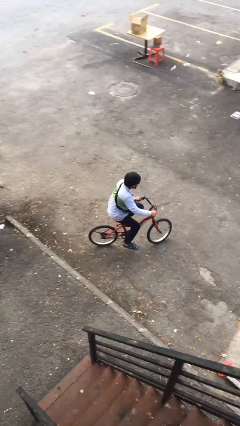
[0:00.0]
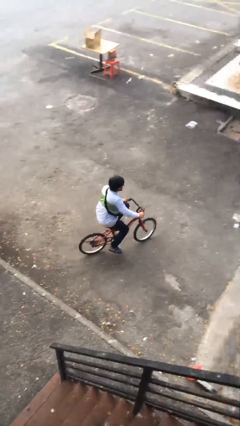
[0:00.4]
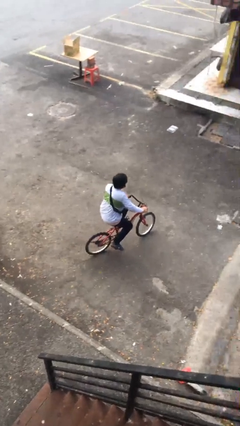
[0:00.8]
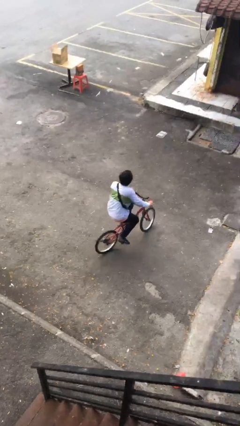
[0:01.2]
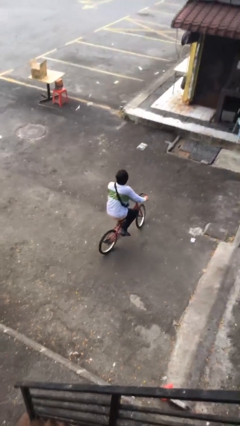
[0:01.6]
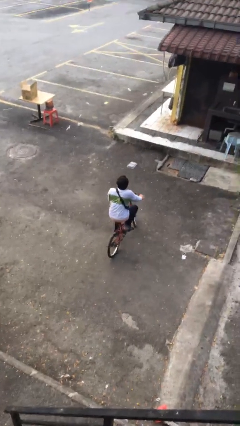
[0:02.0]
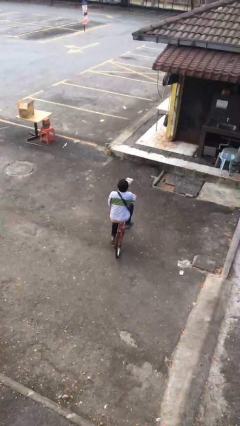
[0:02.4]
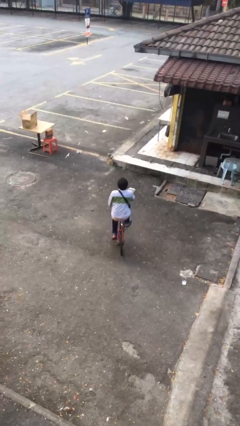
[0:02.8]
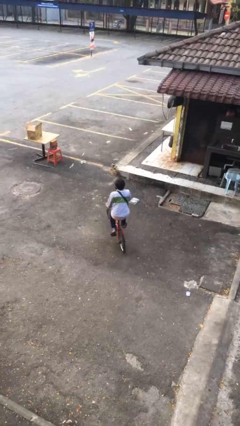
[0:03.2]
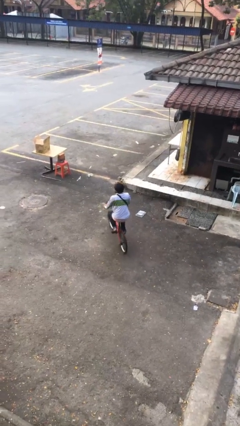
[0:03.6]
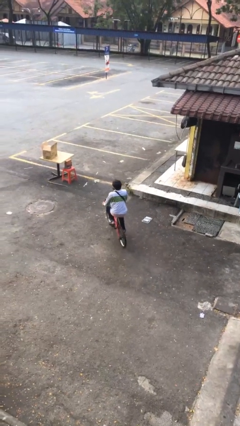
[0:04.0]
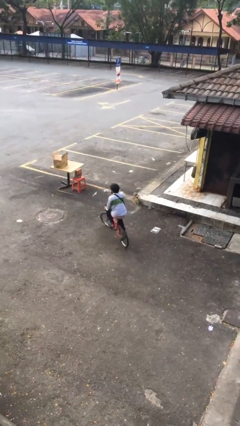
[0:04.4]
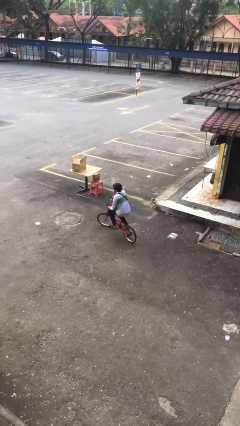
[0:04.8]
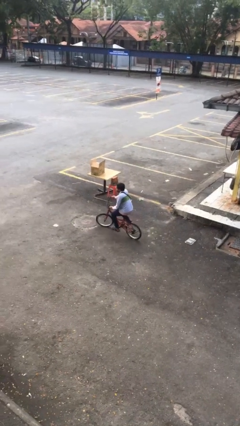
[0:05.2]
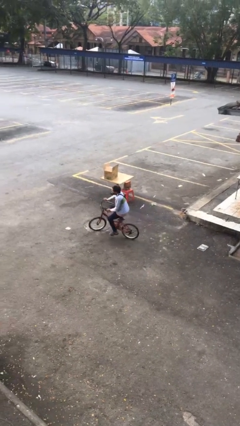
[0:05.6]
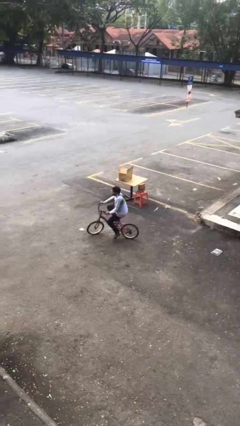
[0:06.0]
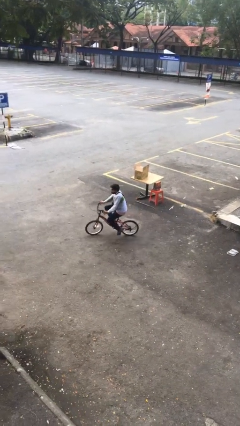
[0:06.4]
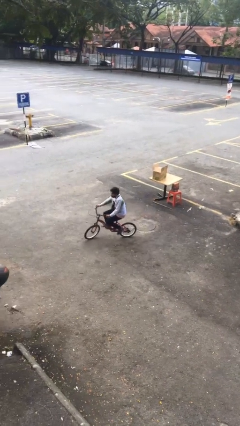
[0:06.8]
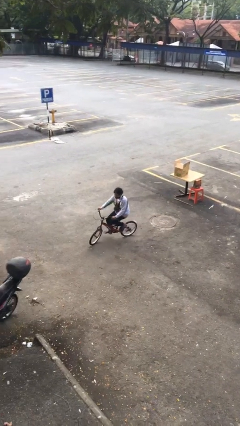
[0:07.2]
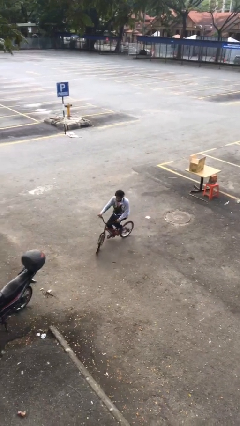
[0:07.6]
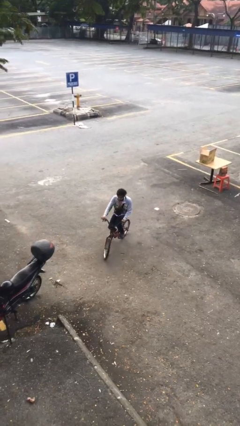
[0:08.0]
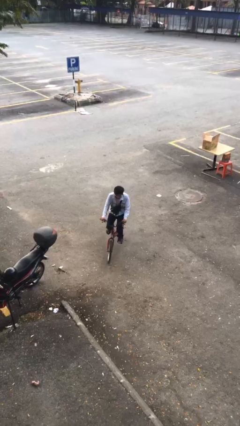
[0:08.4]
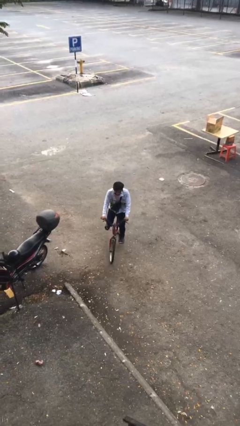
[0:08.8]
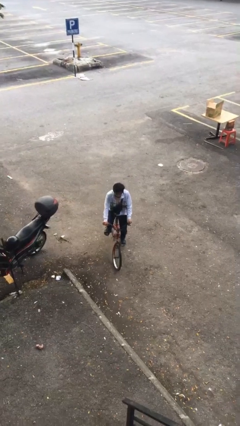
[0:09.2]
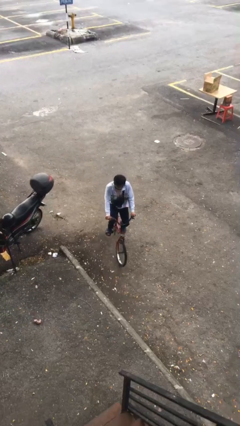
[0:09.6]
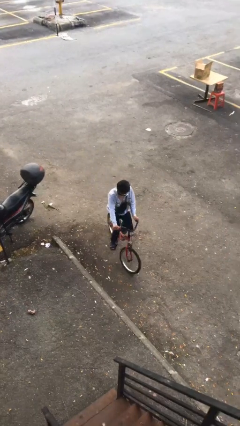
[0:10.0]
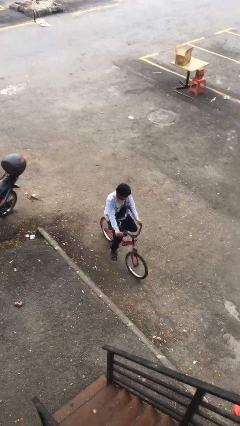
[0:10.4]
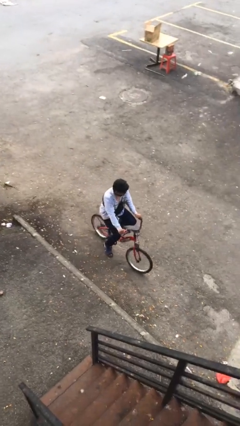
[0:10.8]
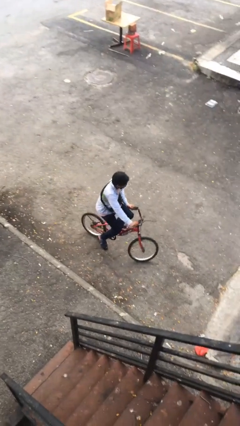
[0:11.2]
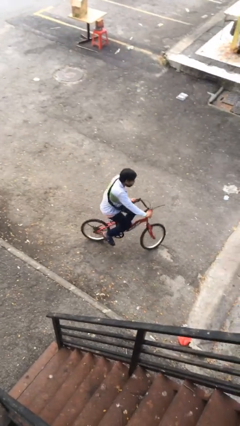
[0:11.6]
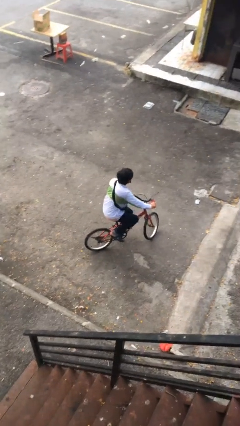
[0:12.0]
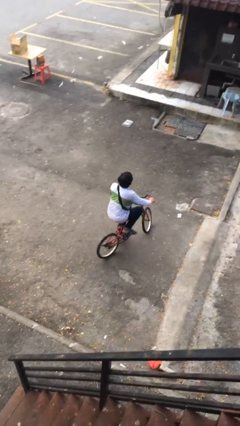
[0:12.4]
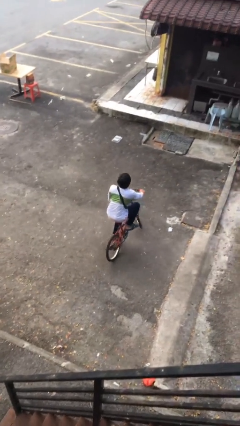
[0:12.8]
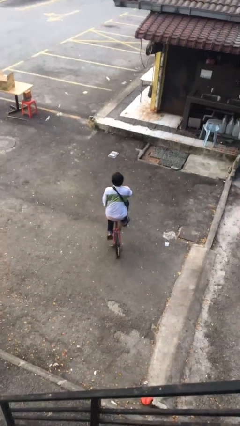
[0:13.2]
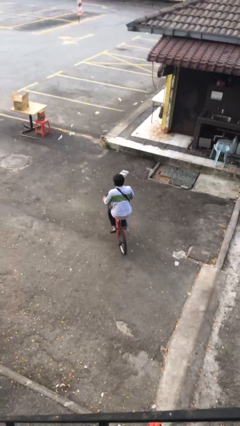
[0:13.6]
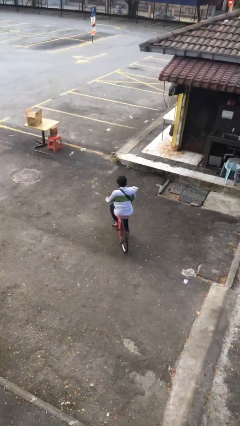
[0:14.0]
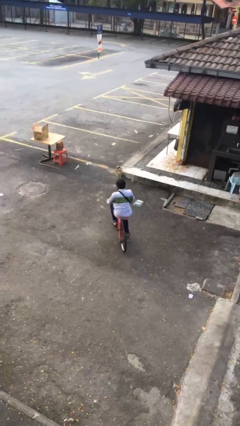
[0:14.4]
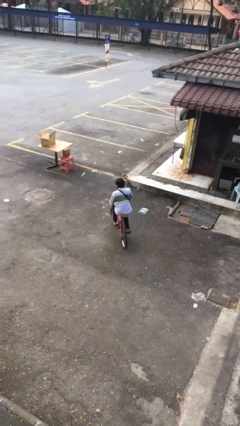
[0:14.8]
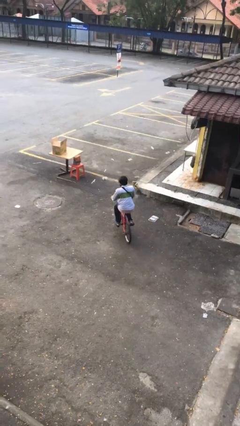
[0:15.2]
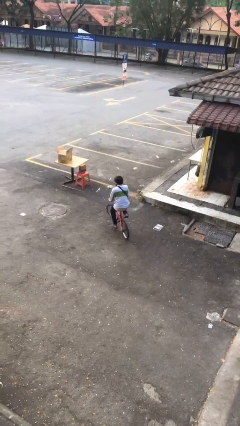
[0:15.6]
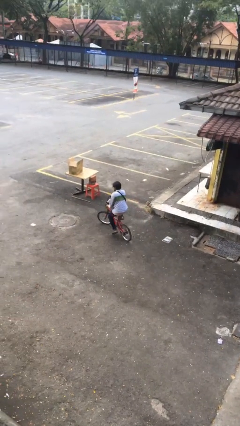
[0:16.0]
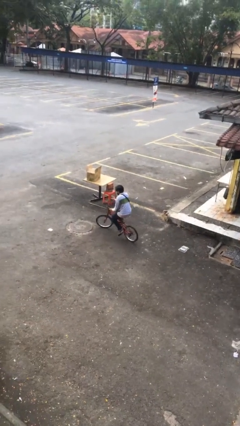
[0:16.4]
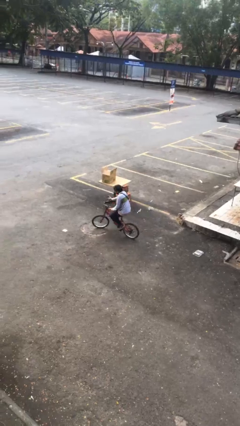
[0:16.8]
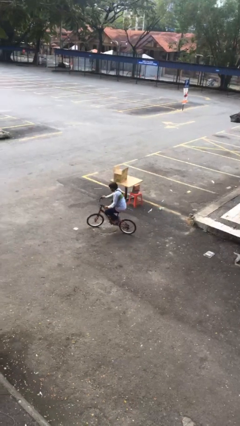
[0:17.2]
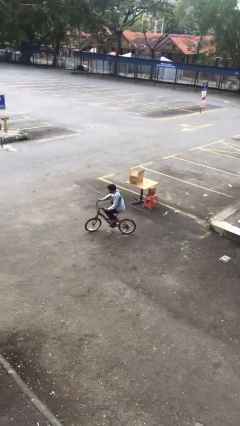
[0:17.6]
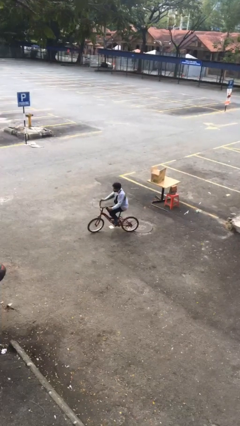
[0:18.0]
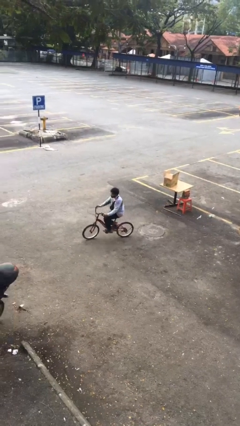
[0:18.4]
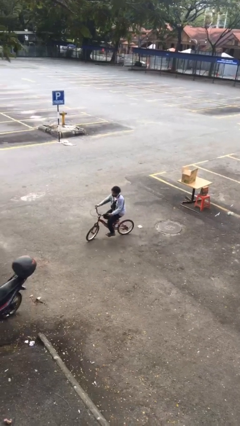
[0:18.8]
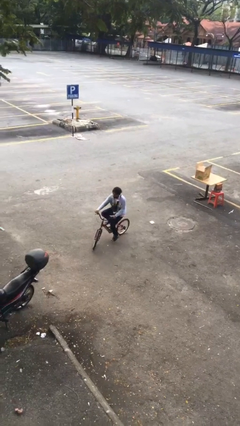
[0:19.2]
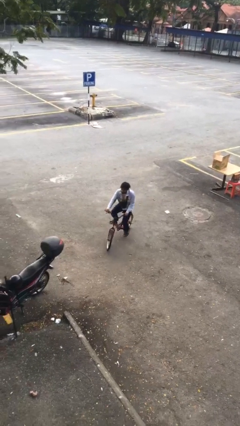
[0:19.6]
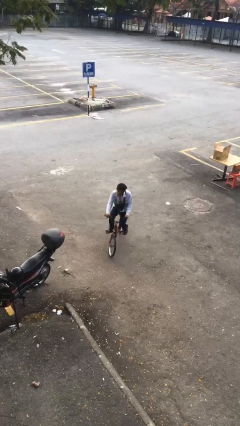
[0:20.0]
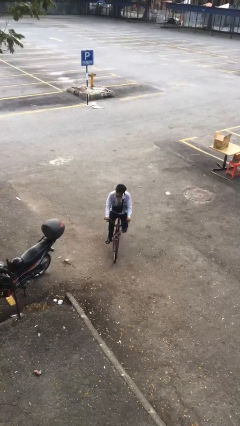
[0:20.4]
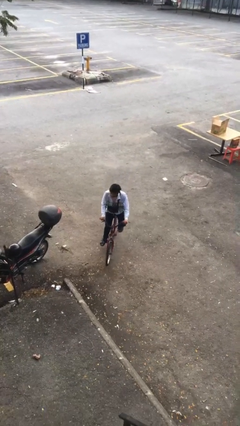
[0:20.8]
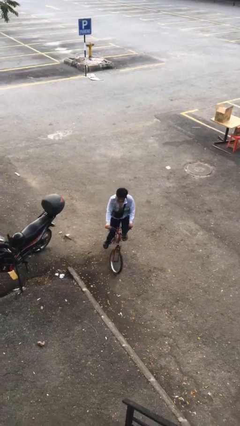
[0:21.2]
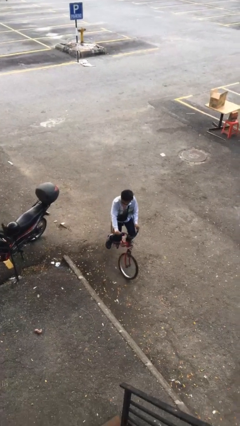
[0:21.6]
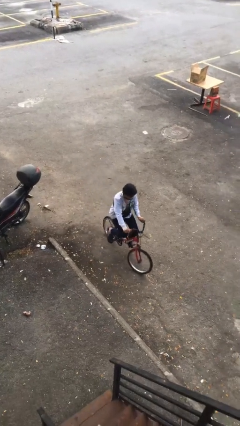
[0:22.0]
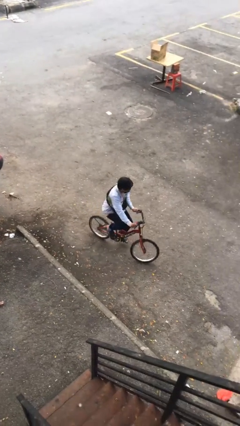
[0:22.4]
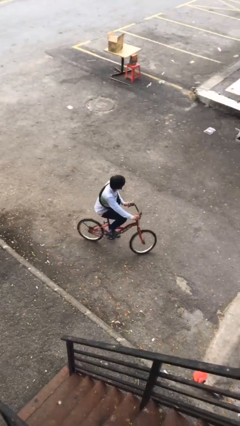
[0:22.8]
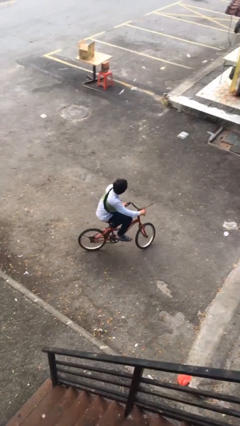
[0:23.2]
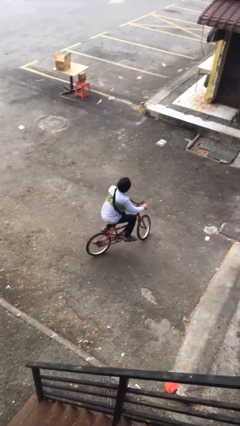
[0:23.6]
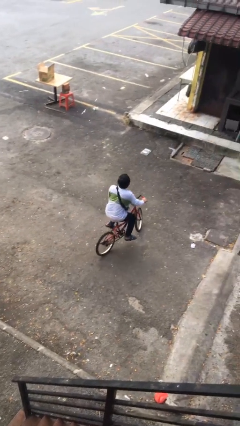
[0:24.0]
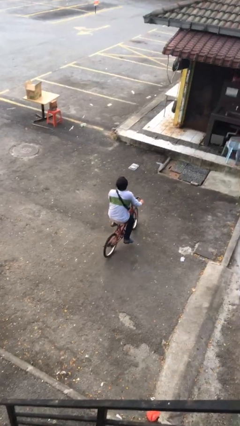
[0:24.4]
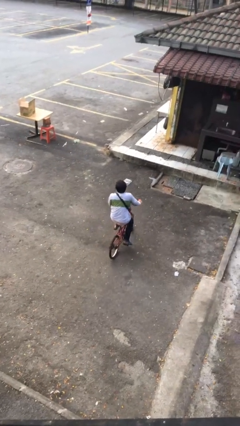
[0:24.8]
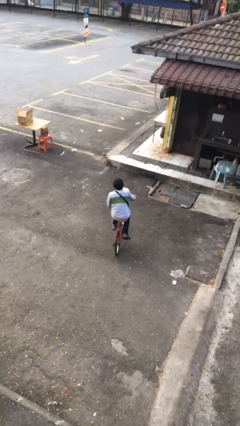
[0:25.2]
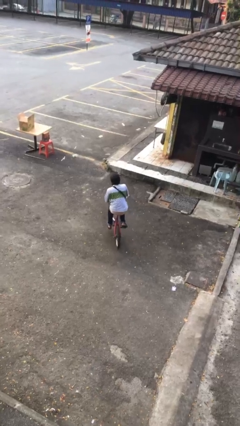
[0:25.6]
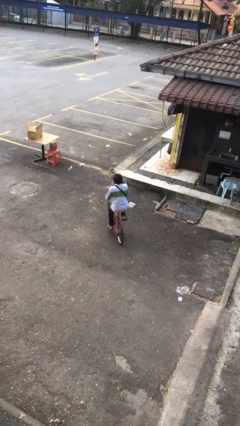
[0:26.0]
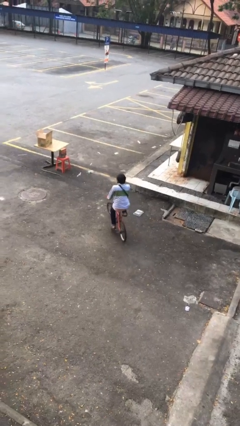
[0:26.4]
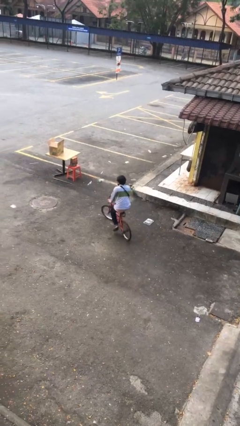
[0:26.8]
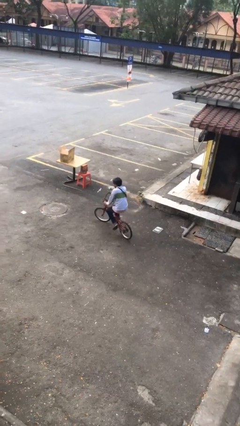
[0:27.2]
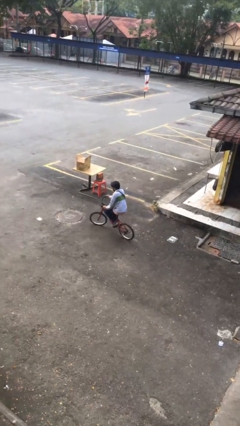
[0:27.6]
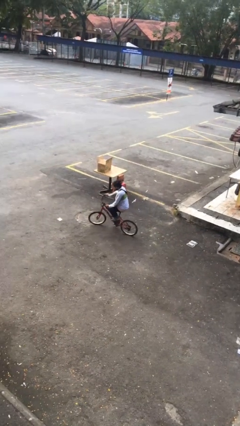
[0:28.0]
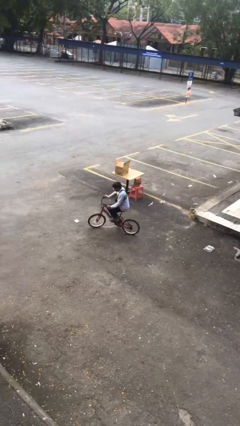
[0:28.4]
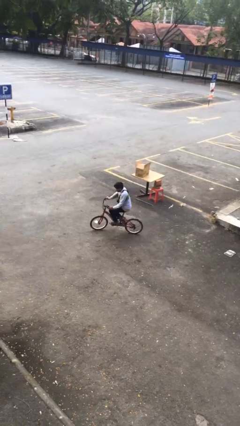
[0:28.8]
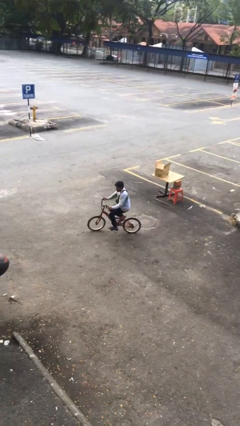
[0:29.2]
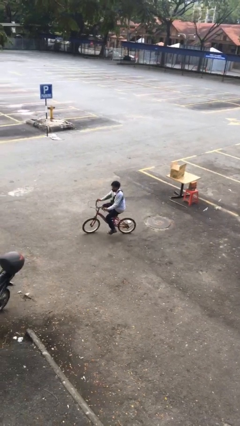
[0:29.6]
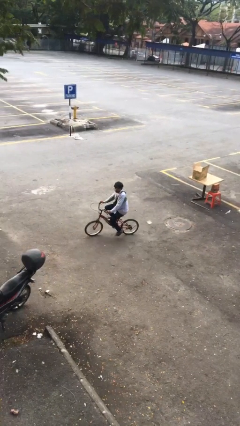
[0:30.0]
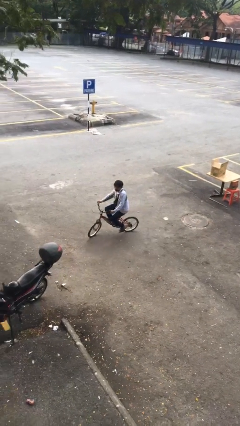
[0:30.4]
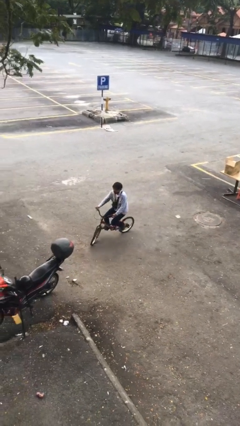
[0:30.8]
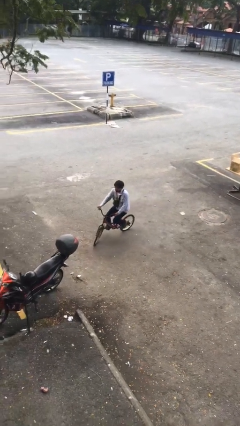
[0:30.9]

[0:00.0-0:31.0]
person rides bicycle

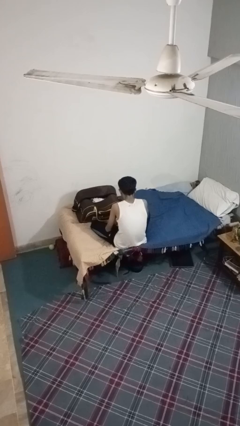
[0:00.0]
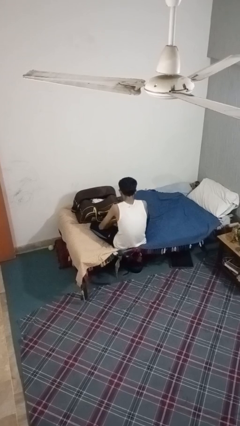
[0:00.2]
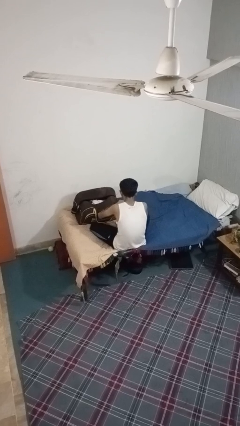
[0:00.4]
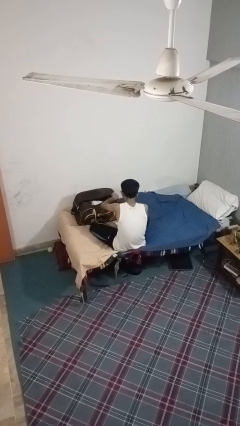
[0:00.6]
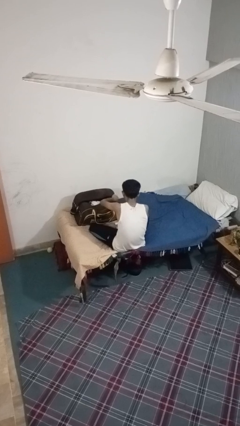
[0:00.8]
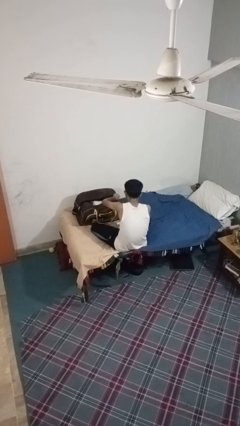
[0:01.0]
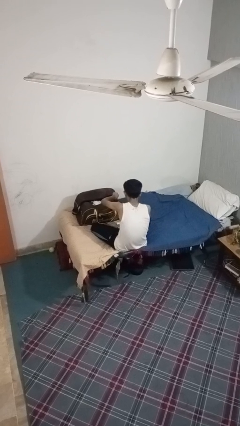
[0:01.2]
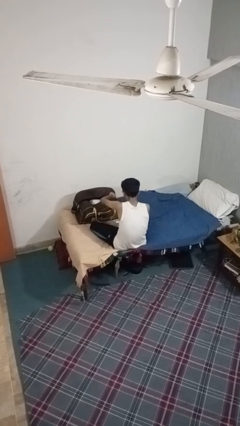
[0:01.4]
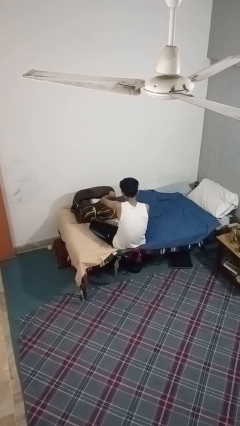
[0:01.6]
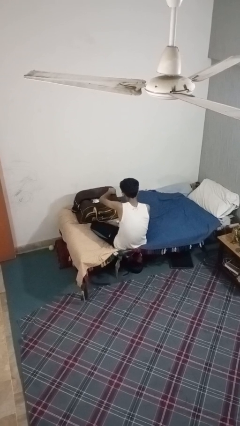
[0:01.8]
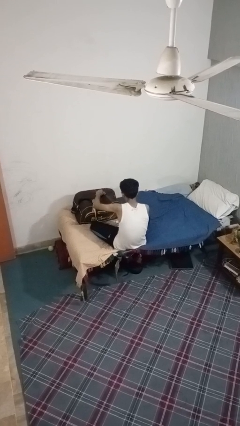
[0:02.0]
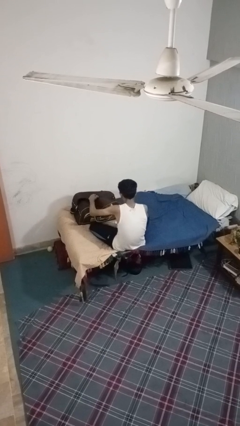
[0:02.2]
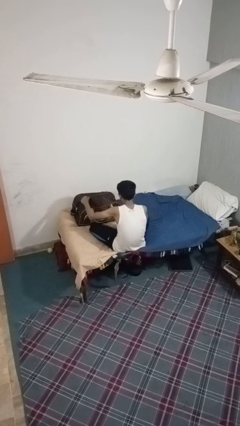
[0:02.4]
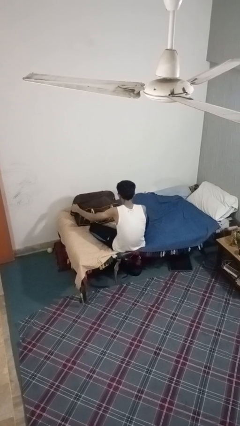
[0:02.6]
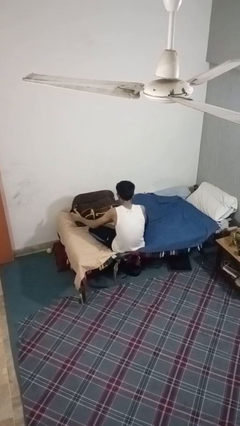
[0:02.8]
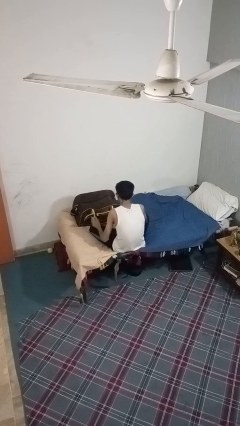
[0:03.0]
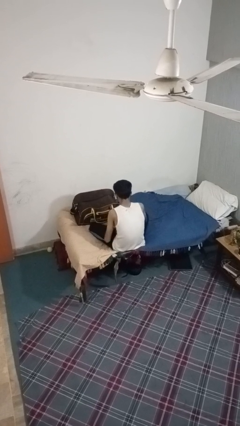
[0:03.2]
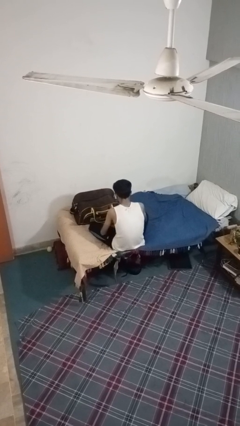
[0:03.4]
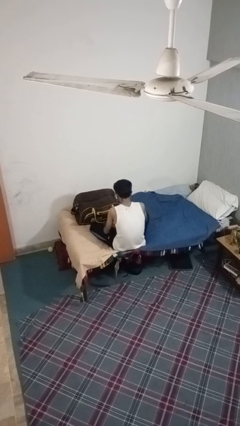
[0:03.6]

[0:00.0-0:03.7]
person closes suitcase
